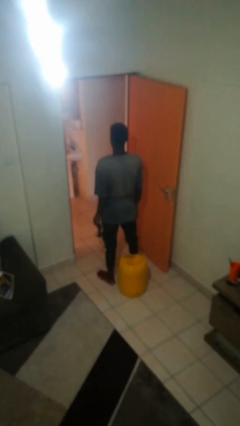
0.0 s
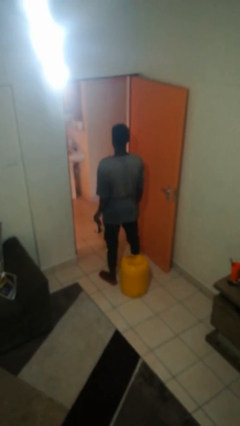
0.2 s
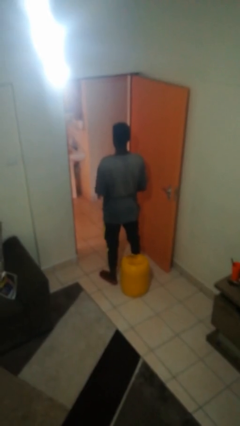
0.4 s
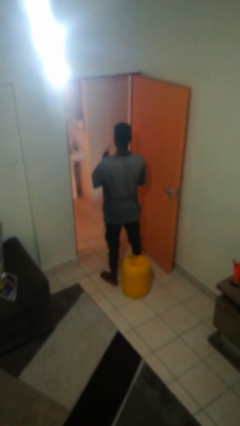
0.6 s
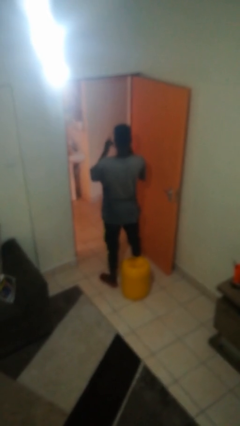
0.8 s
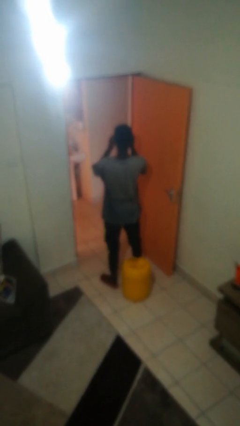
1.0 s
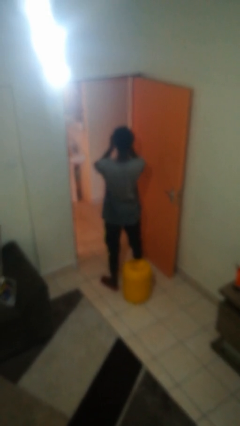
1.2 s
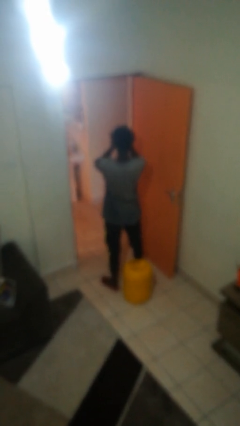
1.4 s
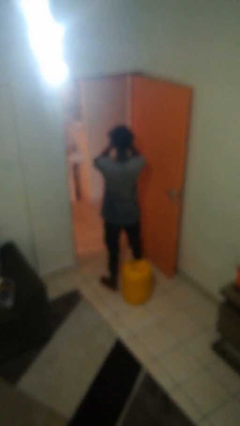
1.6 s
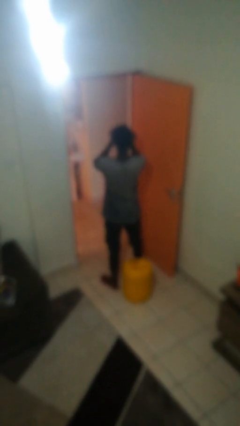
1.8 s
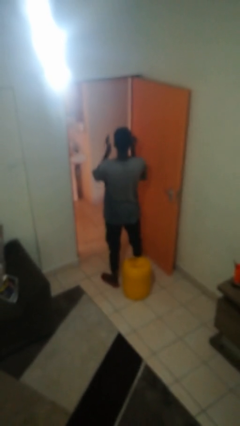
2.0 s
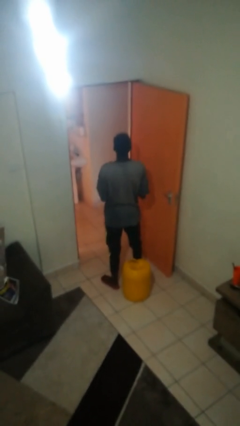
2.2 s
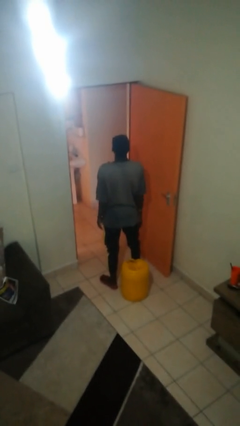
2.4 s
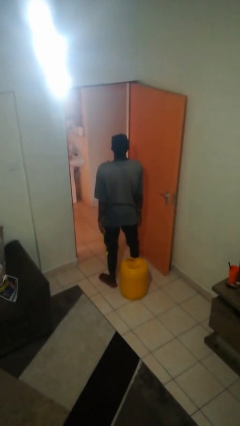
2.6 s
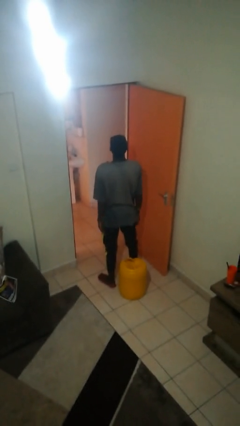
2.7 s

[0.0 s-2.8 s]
person puts on sunglasses

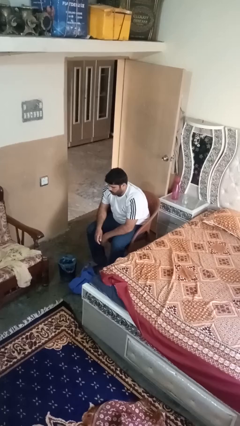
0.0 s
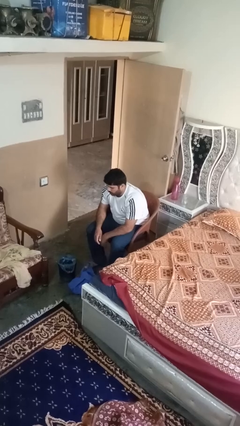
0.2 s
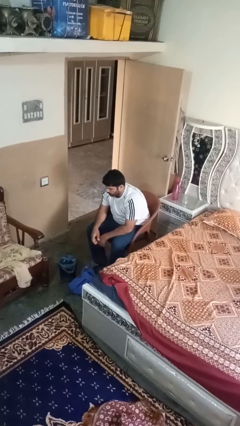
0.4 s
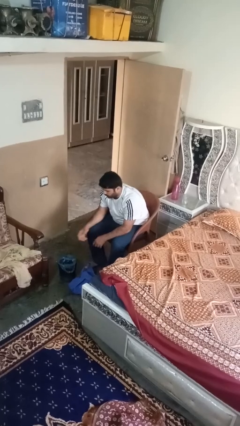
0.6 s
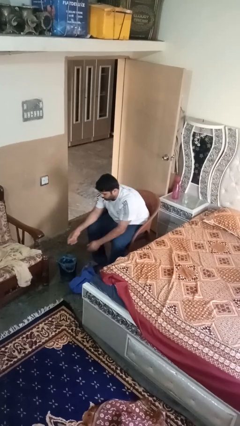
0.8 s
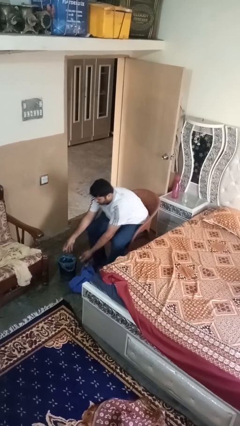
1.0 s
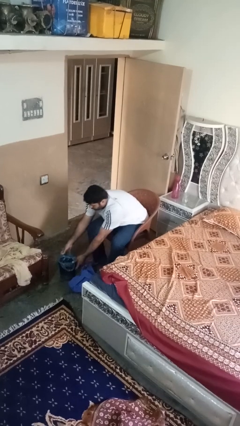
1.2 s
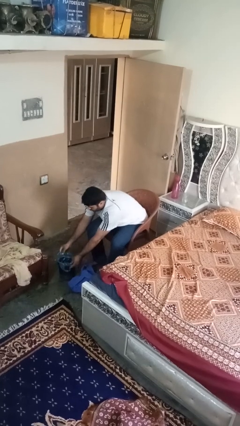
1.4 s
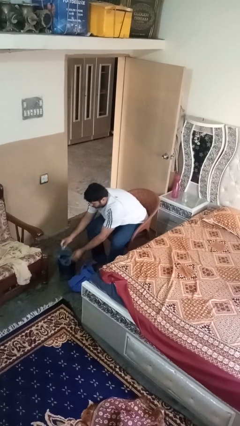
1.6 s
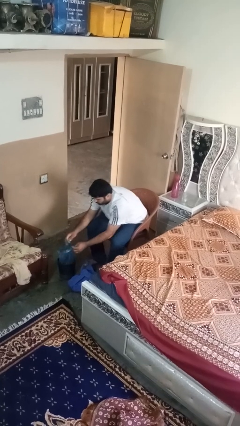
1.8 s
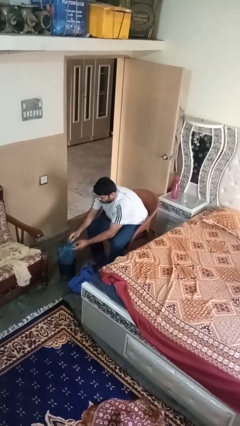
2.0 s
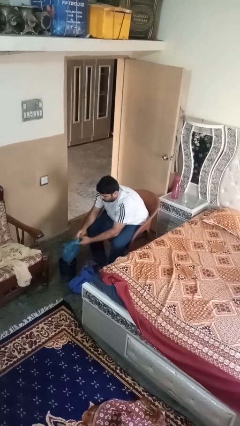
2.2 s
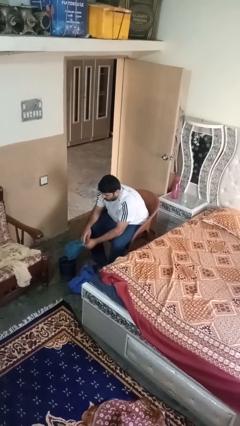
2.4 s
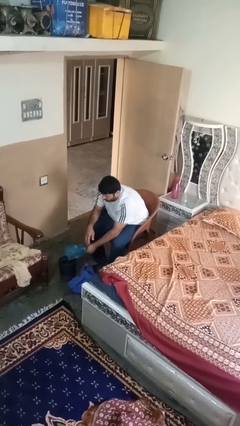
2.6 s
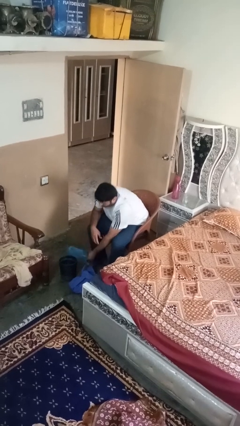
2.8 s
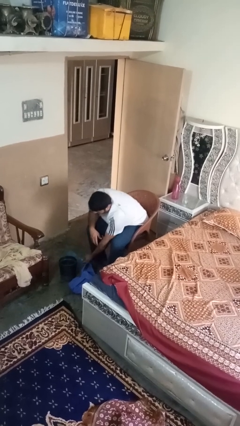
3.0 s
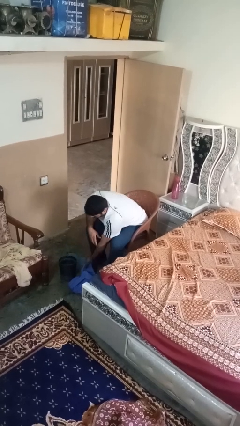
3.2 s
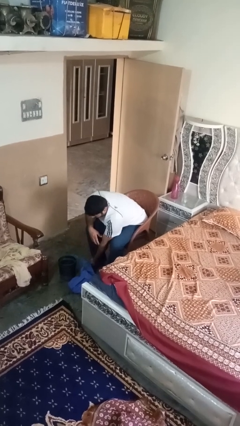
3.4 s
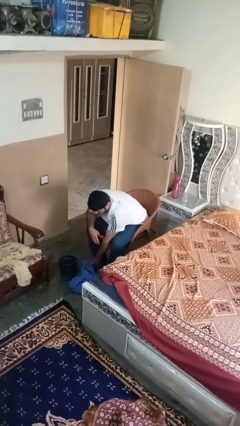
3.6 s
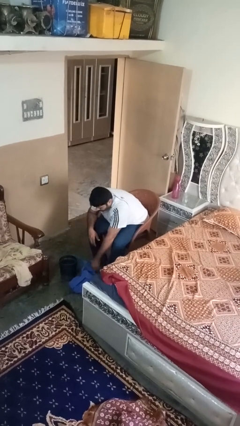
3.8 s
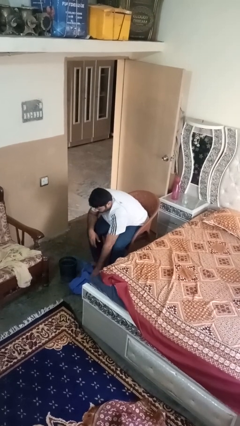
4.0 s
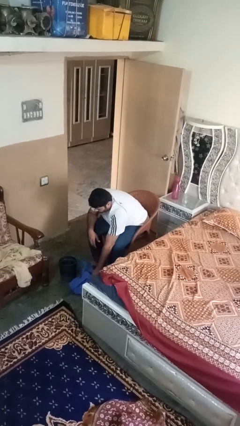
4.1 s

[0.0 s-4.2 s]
person removes trashbag from trashcan

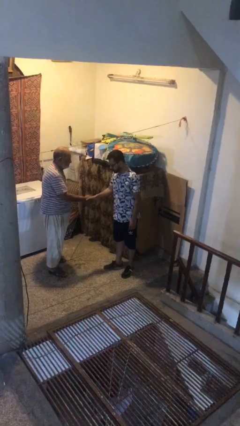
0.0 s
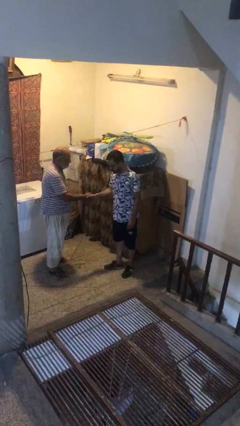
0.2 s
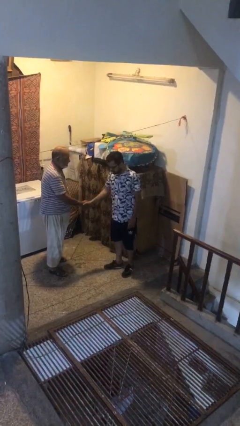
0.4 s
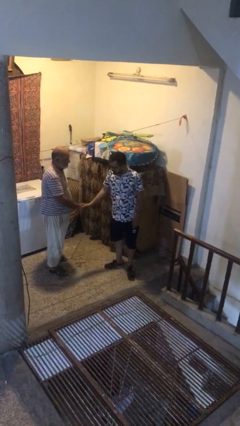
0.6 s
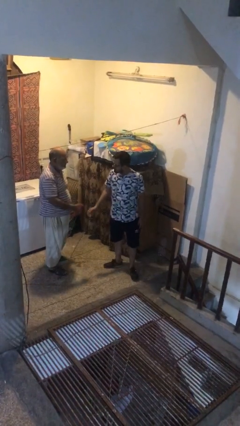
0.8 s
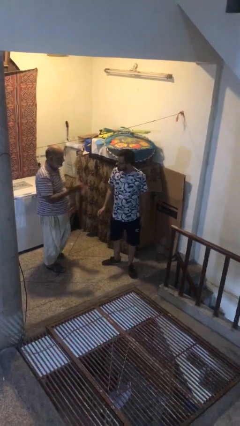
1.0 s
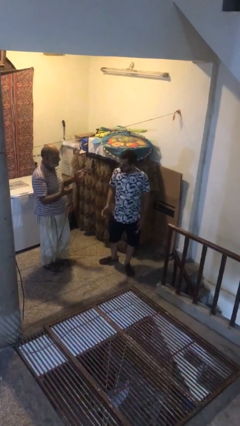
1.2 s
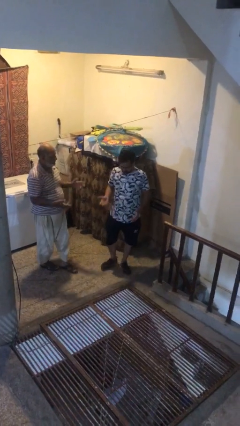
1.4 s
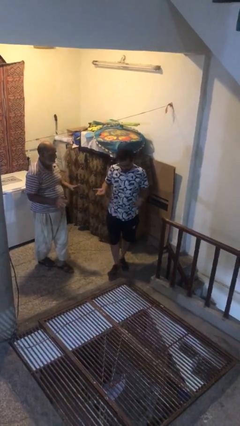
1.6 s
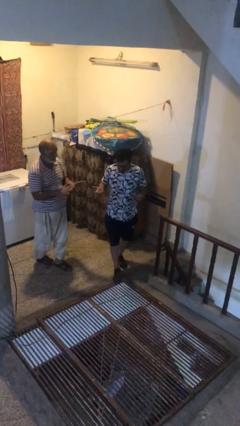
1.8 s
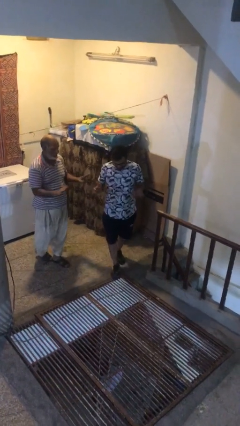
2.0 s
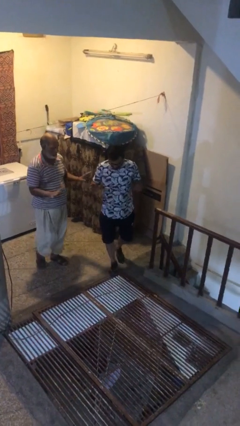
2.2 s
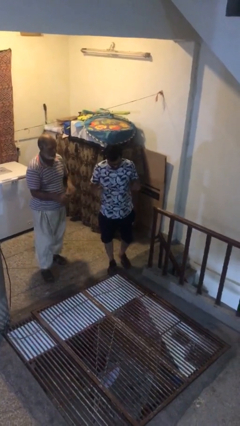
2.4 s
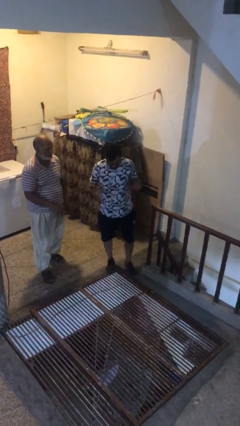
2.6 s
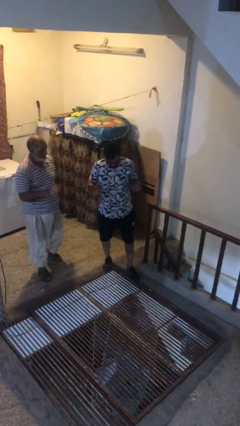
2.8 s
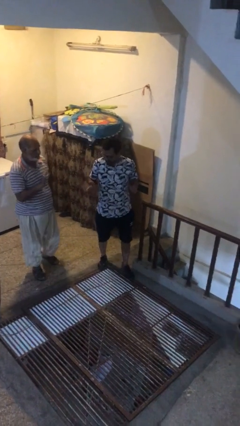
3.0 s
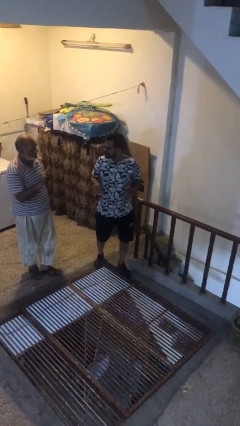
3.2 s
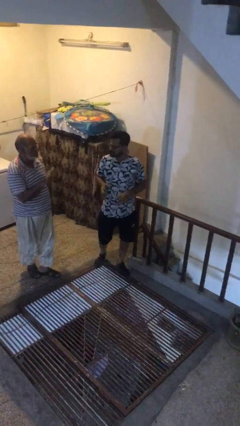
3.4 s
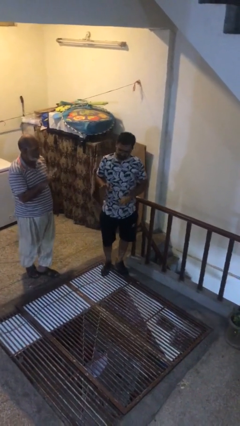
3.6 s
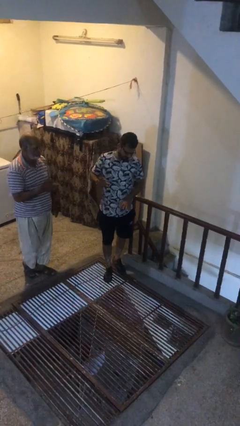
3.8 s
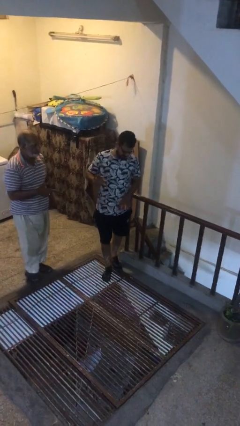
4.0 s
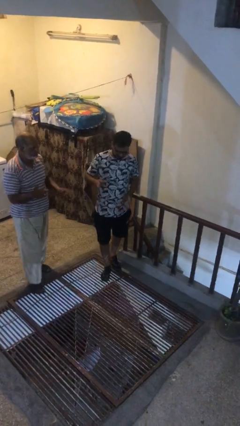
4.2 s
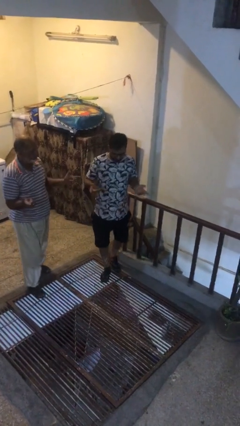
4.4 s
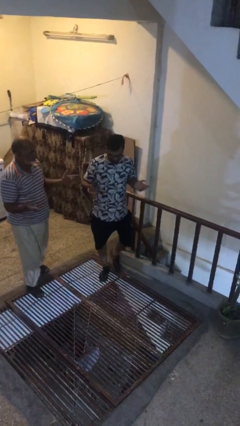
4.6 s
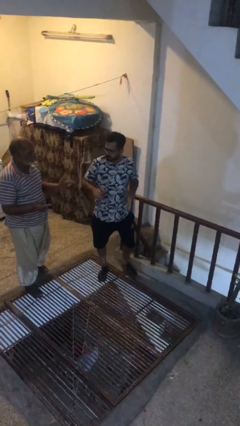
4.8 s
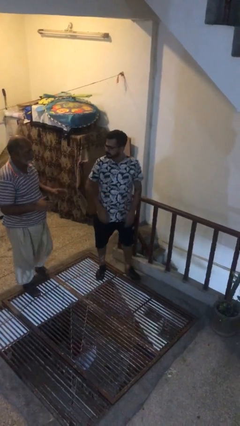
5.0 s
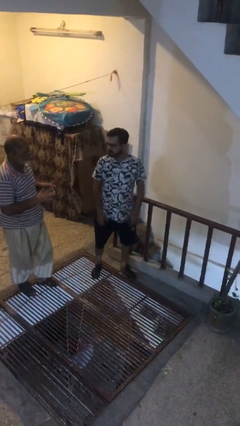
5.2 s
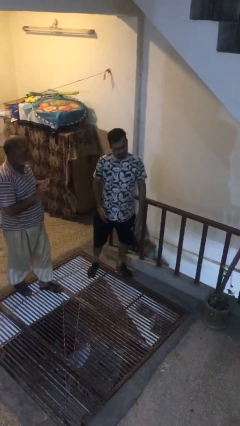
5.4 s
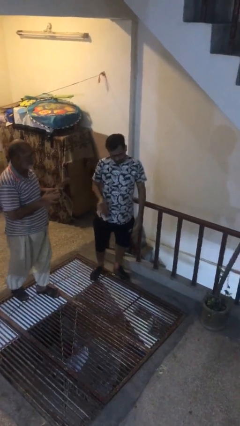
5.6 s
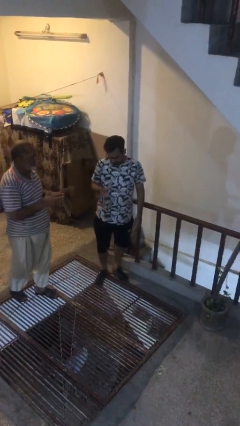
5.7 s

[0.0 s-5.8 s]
person talks to person

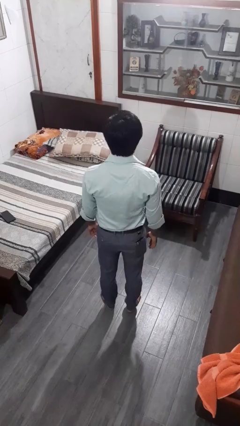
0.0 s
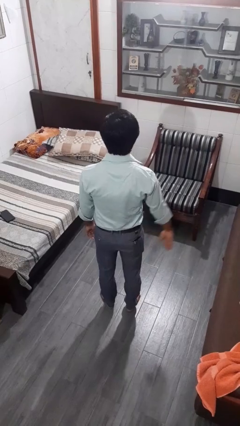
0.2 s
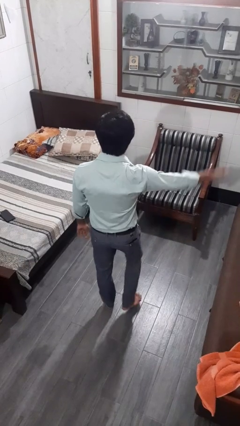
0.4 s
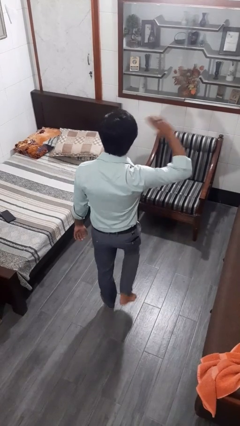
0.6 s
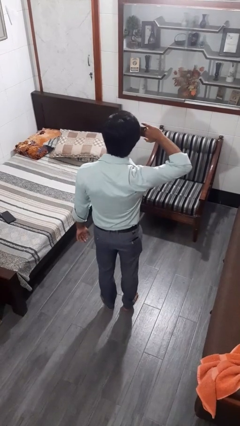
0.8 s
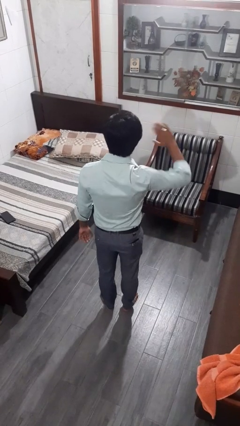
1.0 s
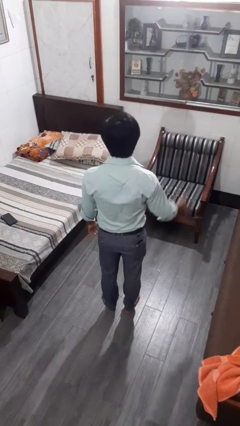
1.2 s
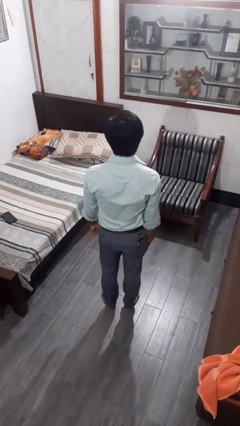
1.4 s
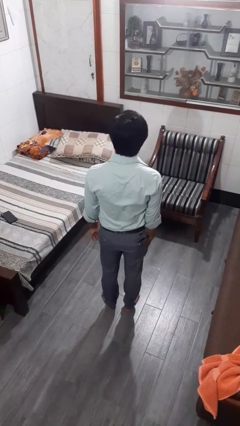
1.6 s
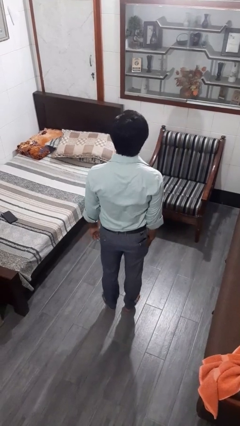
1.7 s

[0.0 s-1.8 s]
person salutes

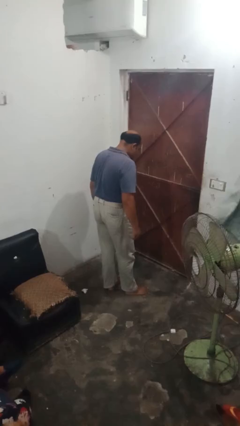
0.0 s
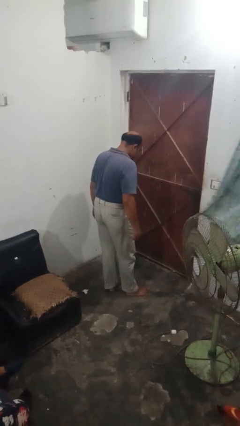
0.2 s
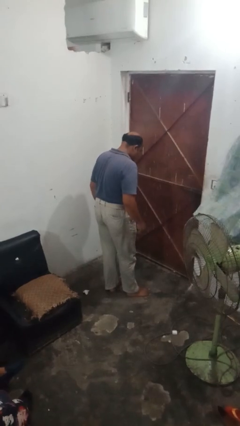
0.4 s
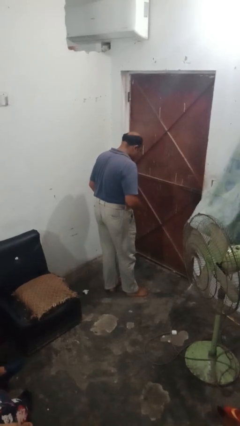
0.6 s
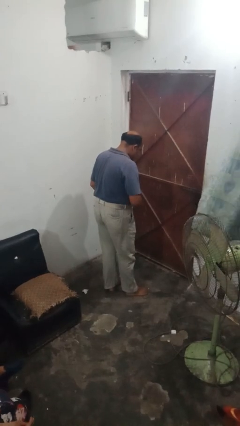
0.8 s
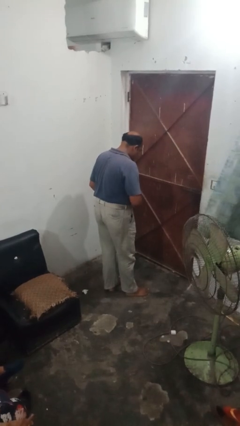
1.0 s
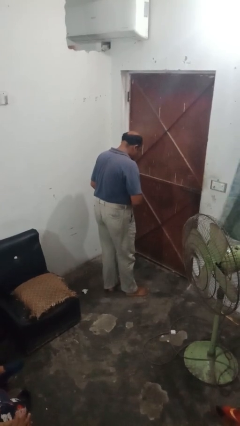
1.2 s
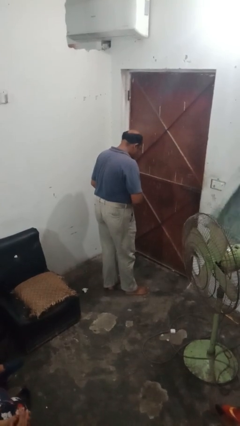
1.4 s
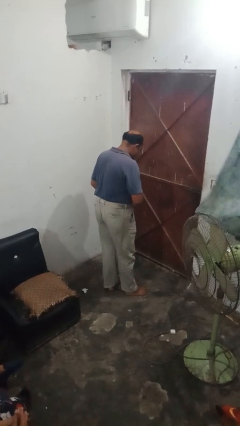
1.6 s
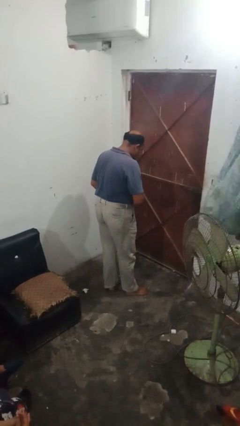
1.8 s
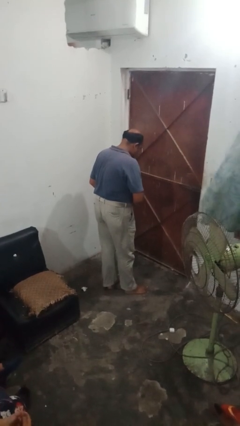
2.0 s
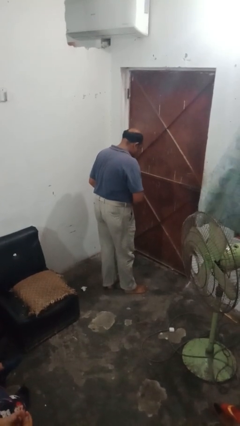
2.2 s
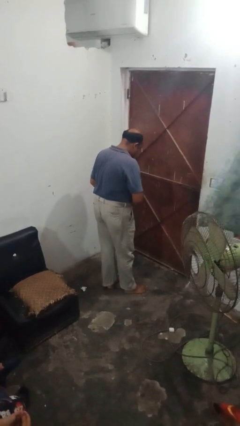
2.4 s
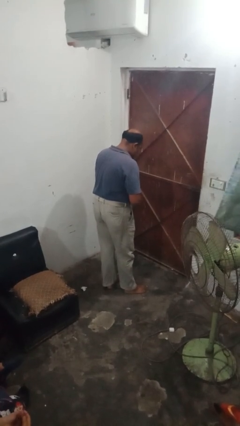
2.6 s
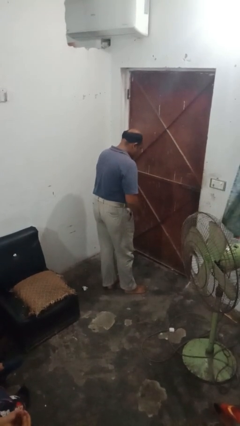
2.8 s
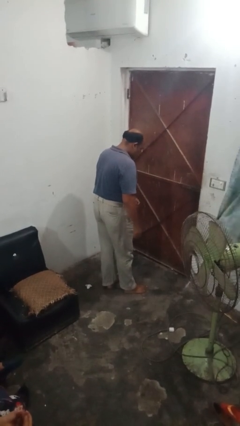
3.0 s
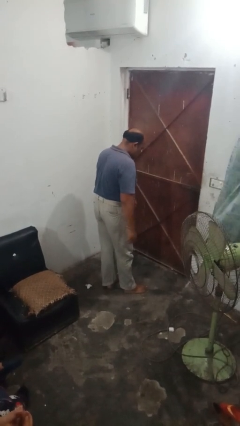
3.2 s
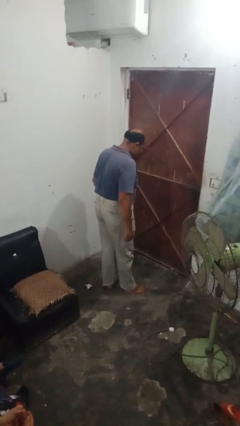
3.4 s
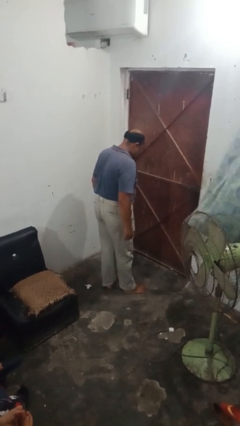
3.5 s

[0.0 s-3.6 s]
person takes off belt
